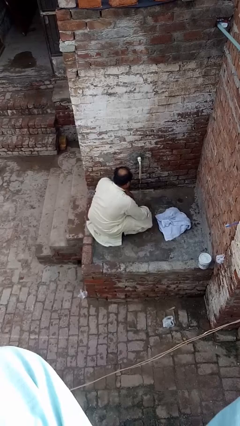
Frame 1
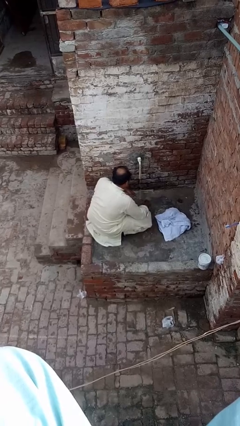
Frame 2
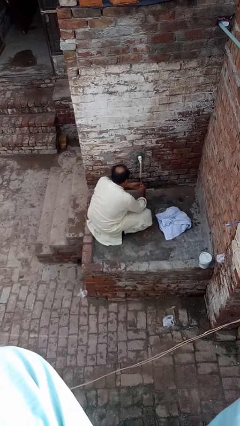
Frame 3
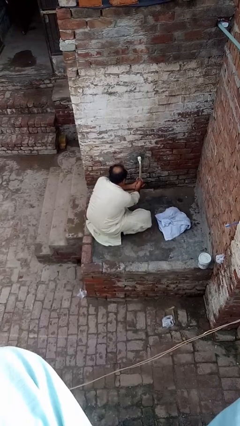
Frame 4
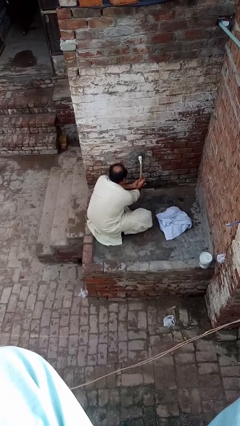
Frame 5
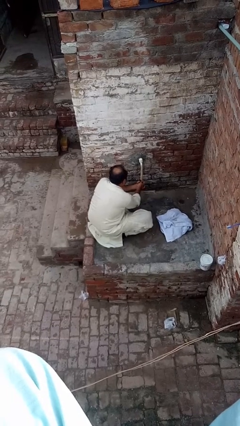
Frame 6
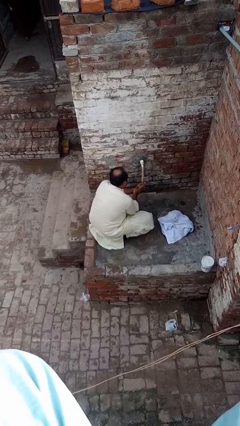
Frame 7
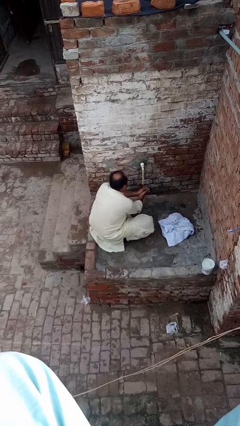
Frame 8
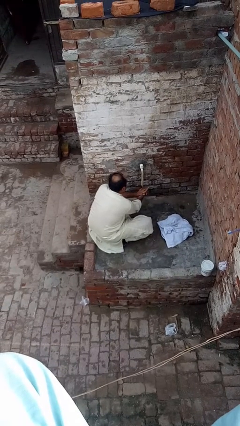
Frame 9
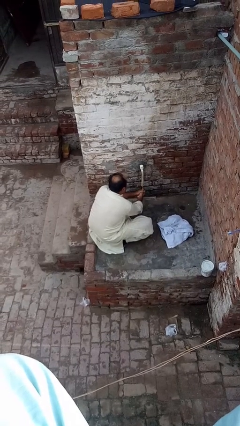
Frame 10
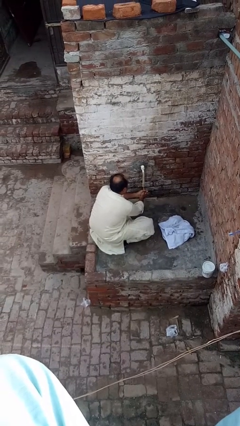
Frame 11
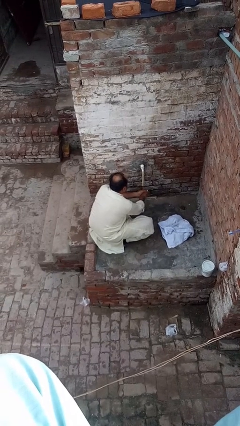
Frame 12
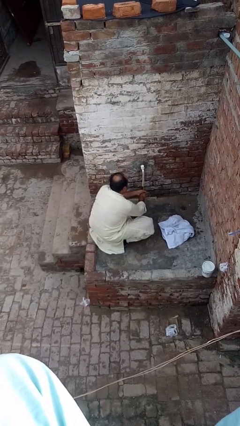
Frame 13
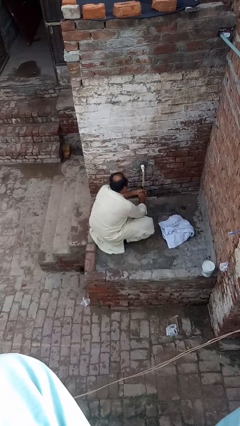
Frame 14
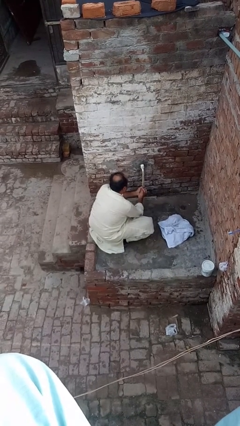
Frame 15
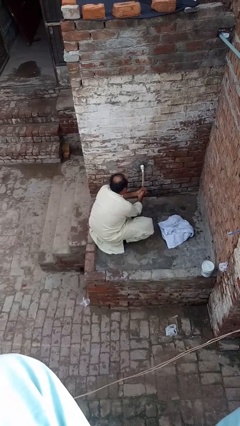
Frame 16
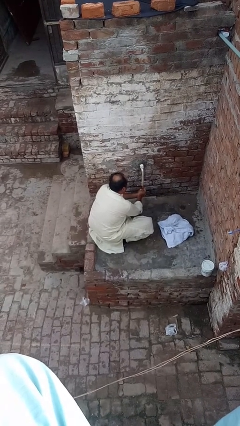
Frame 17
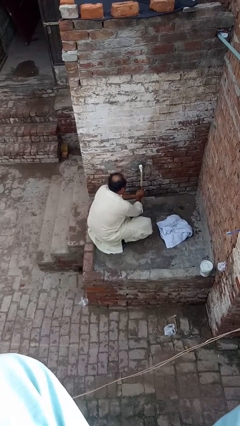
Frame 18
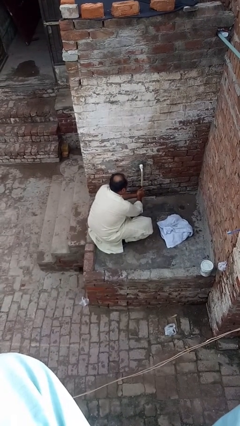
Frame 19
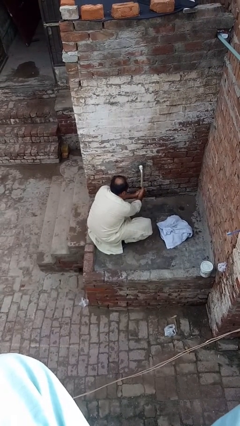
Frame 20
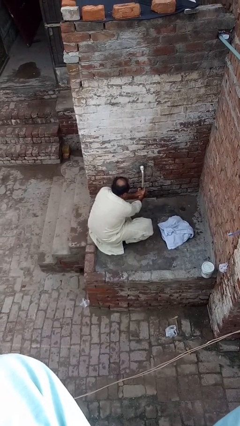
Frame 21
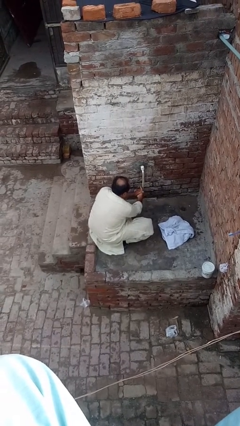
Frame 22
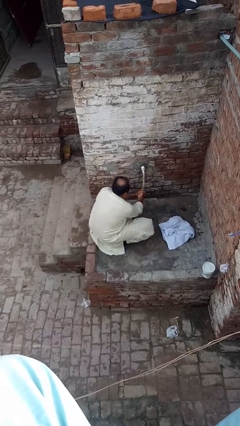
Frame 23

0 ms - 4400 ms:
person washes hands

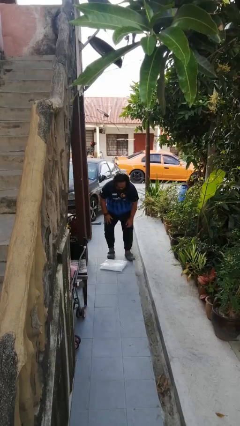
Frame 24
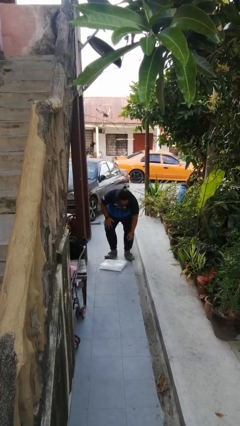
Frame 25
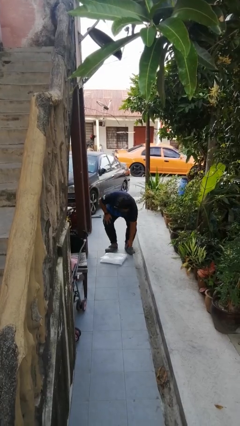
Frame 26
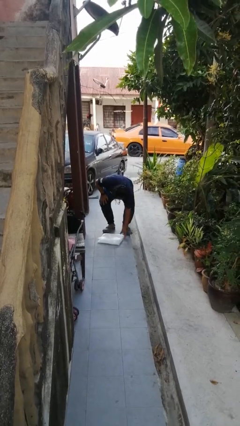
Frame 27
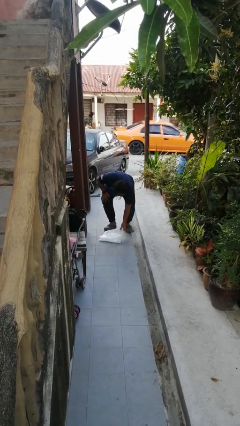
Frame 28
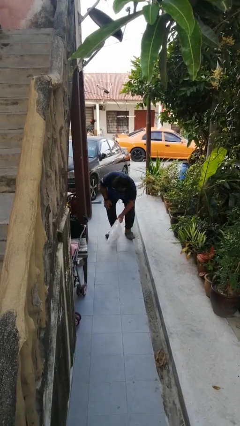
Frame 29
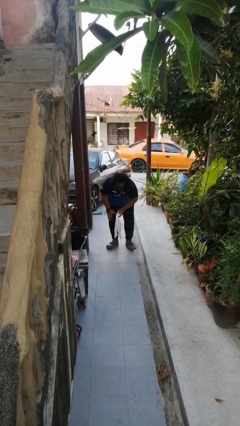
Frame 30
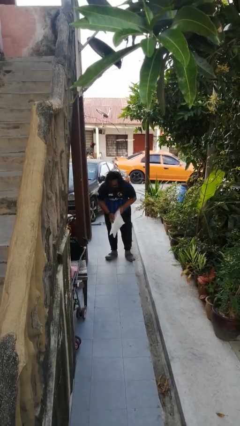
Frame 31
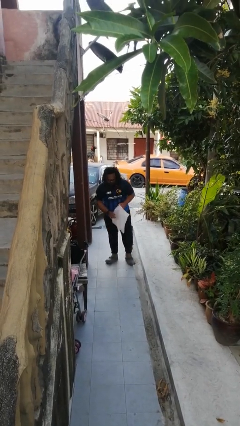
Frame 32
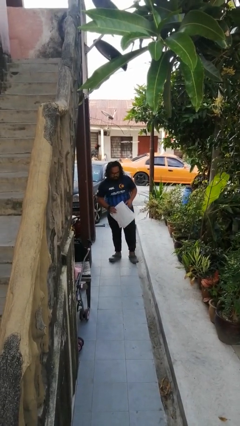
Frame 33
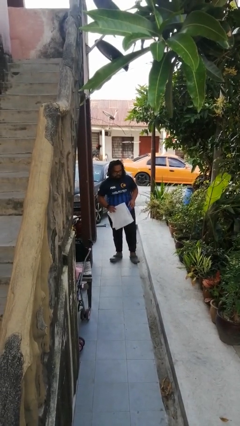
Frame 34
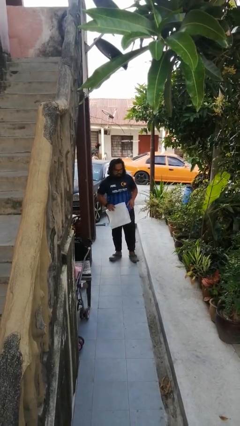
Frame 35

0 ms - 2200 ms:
person picks up object from floor

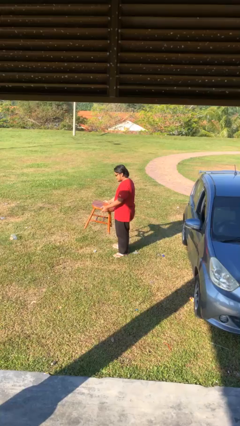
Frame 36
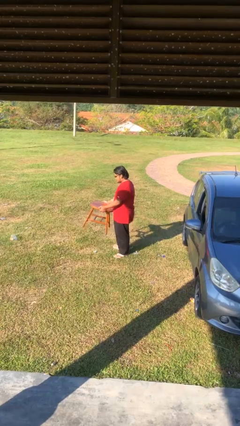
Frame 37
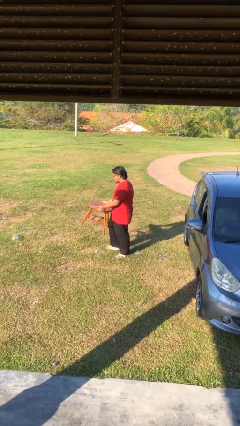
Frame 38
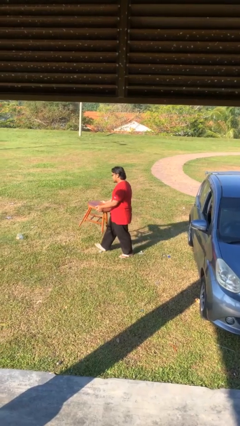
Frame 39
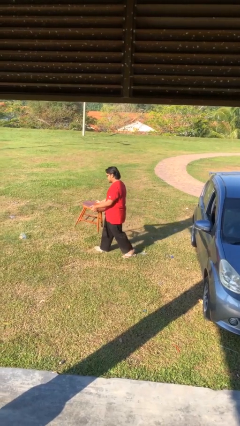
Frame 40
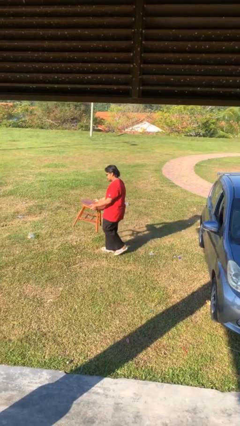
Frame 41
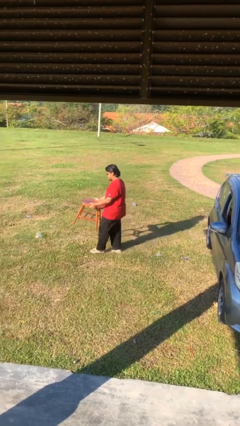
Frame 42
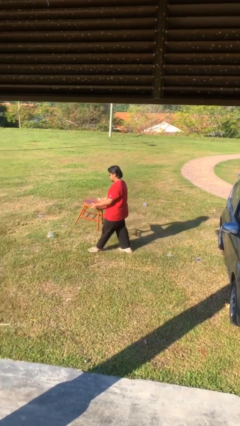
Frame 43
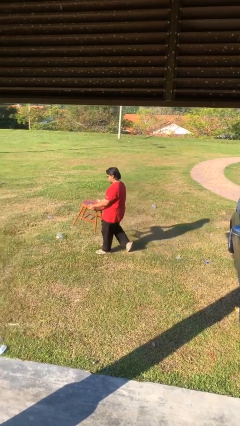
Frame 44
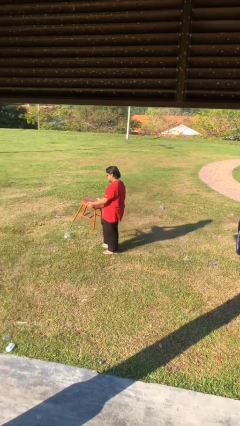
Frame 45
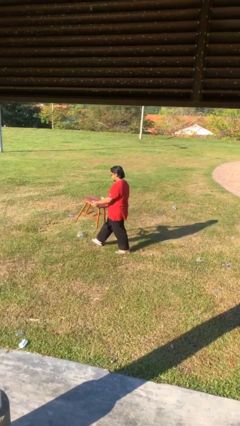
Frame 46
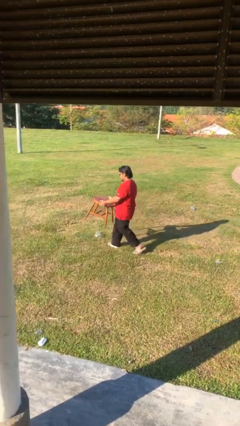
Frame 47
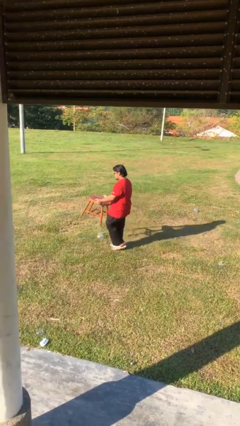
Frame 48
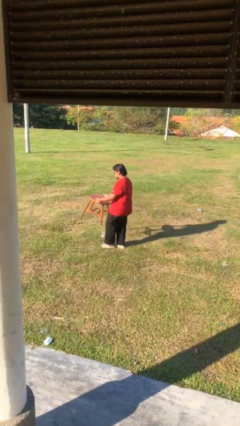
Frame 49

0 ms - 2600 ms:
person carries heavy object

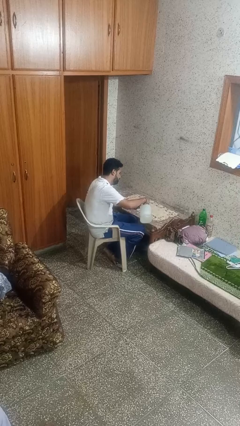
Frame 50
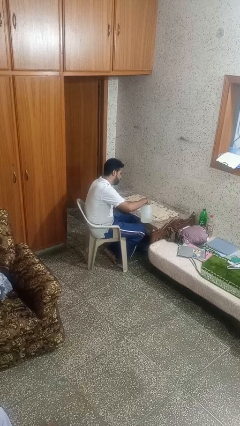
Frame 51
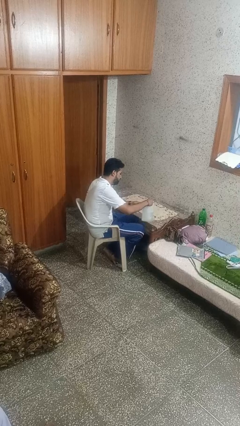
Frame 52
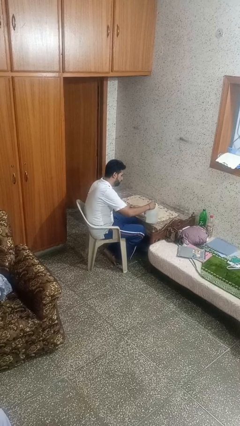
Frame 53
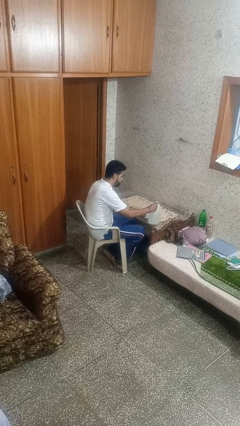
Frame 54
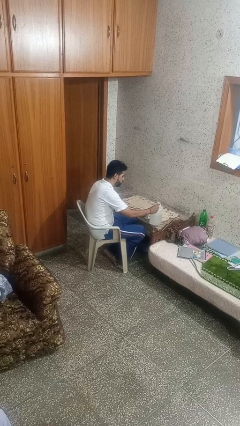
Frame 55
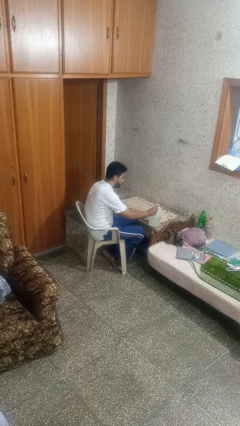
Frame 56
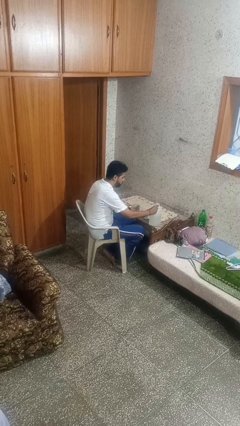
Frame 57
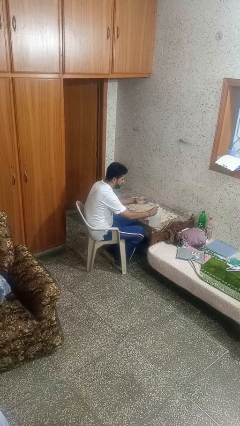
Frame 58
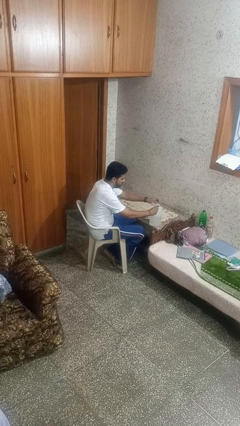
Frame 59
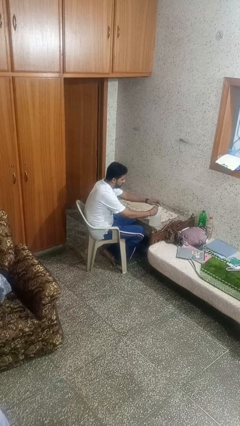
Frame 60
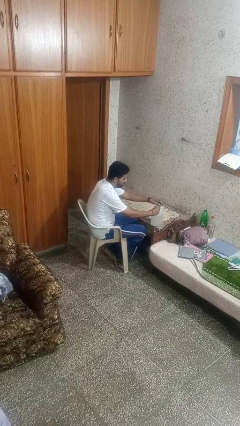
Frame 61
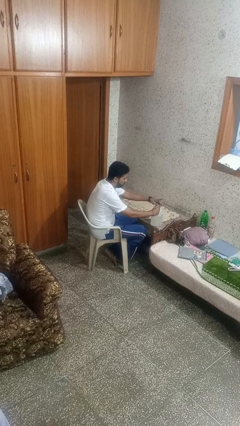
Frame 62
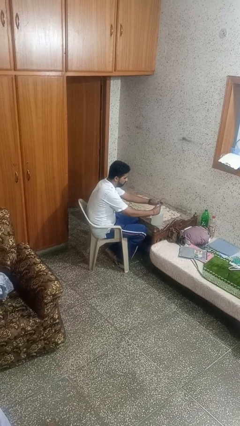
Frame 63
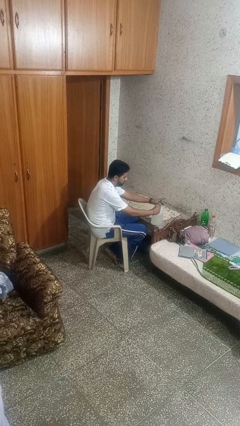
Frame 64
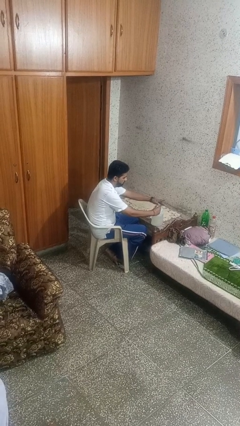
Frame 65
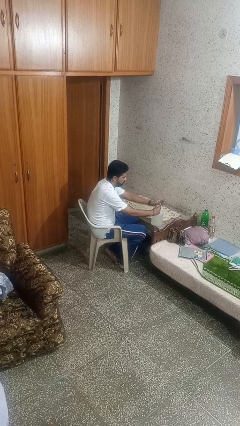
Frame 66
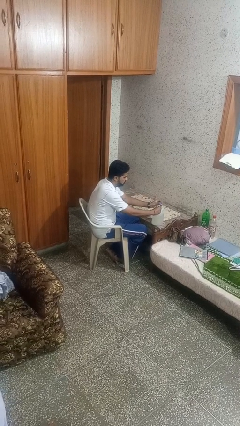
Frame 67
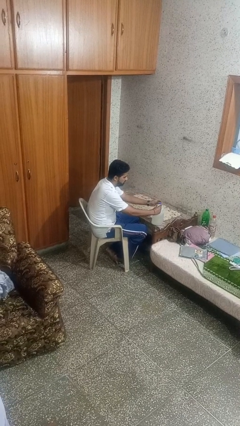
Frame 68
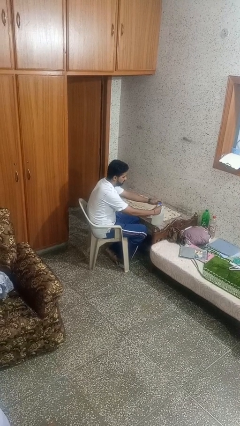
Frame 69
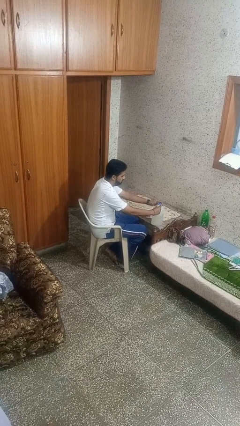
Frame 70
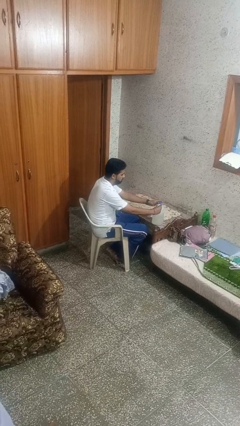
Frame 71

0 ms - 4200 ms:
person screws lid to bottle

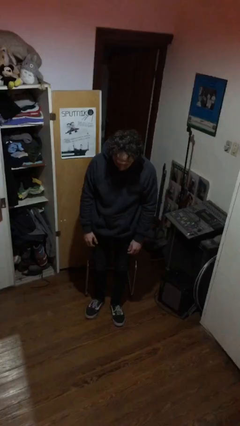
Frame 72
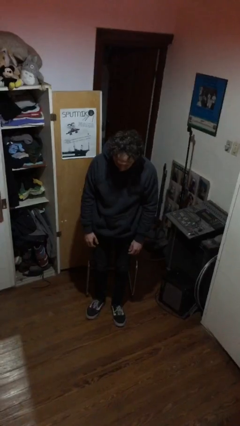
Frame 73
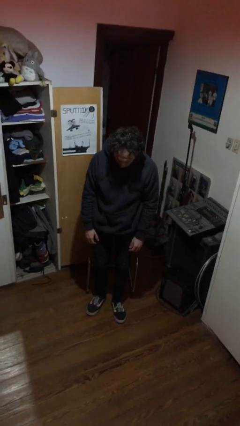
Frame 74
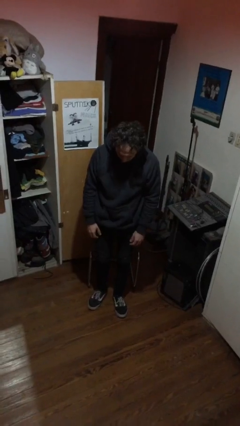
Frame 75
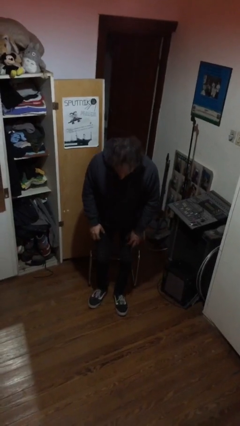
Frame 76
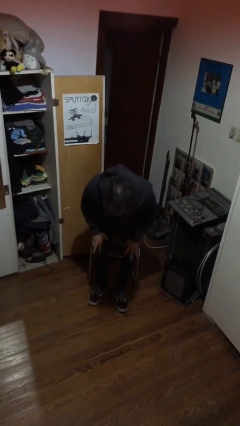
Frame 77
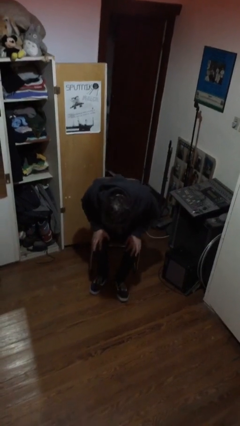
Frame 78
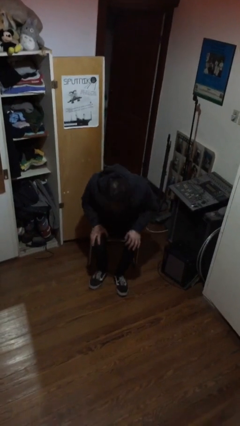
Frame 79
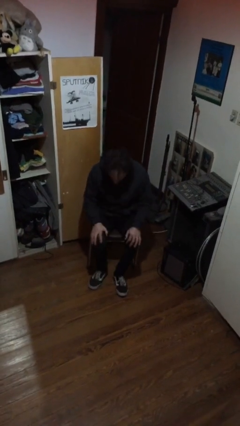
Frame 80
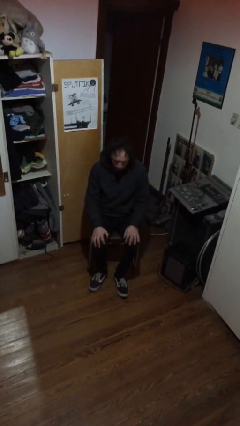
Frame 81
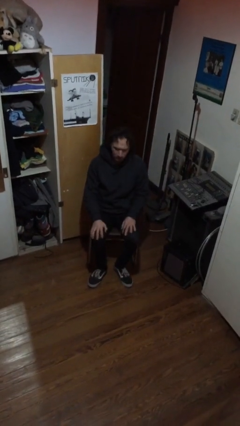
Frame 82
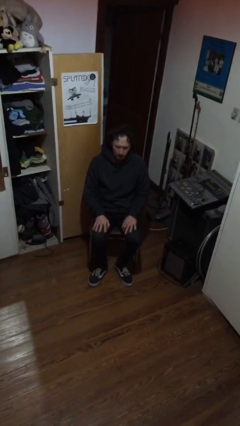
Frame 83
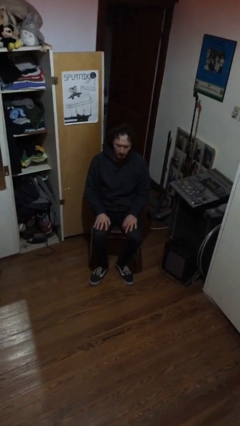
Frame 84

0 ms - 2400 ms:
person sits down

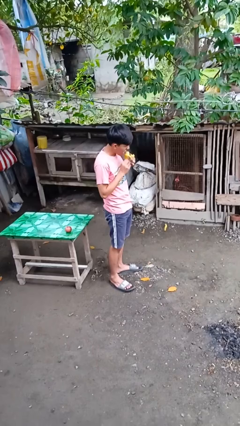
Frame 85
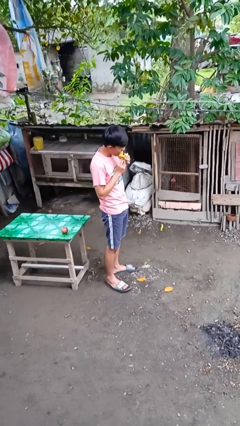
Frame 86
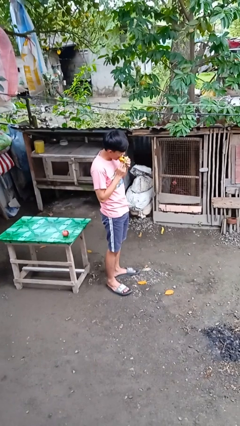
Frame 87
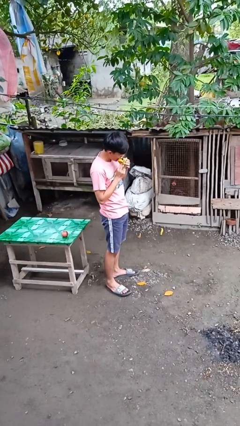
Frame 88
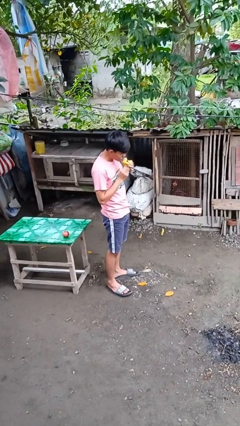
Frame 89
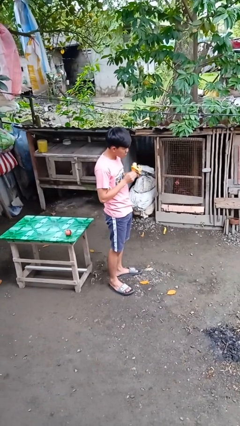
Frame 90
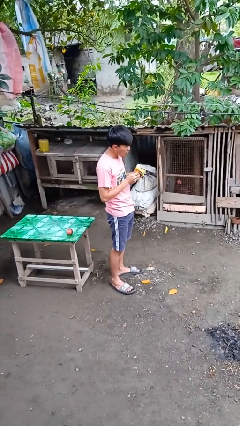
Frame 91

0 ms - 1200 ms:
person eats banana

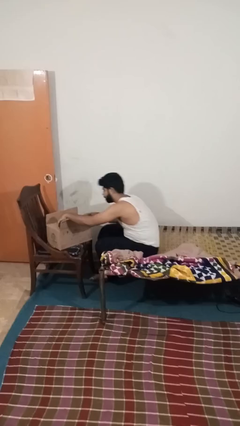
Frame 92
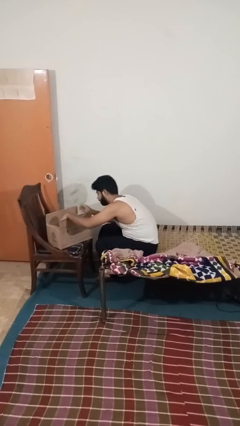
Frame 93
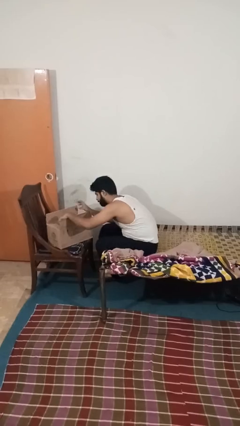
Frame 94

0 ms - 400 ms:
person closes box
